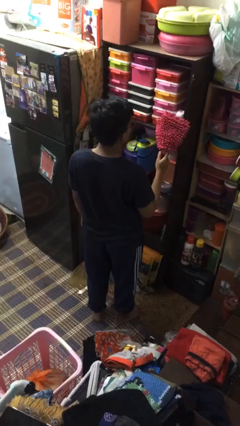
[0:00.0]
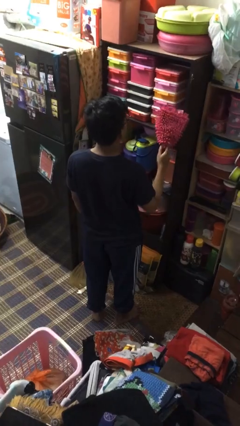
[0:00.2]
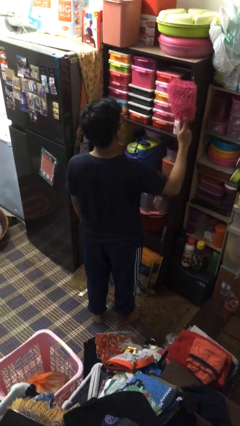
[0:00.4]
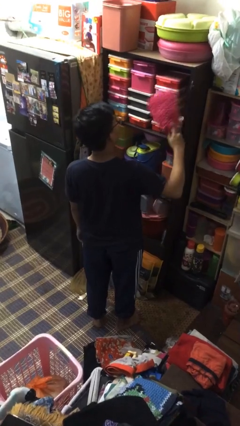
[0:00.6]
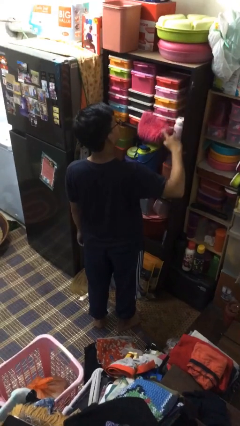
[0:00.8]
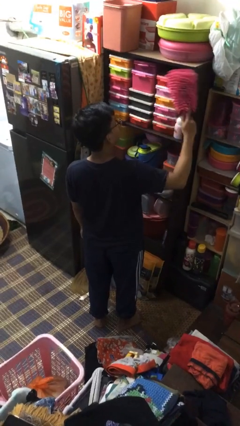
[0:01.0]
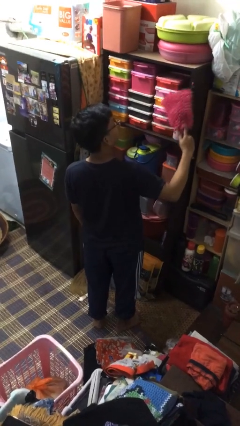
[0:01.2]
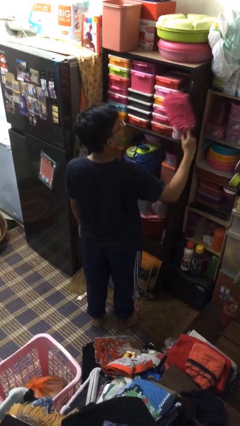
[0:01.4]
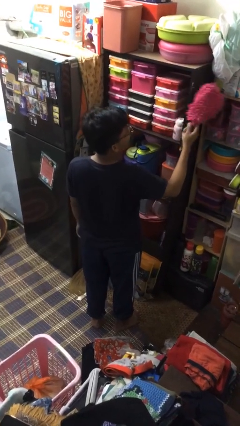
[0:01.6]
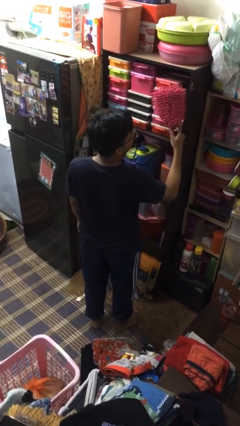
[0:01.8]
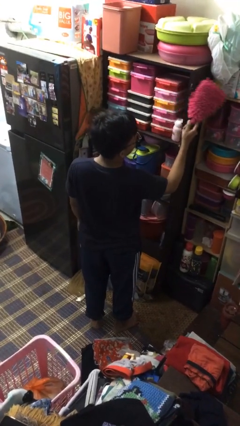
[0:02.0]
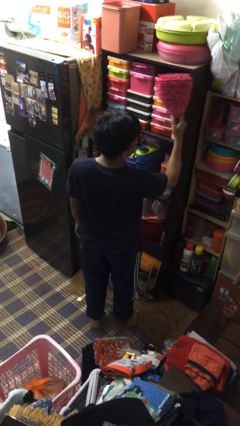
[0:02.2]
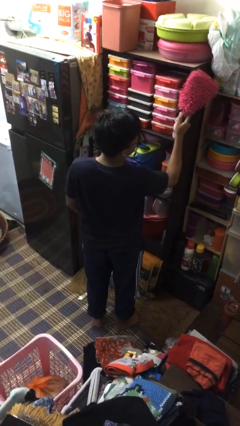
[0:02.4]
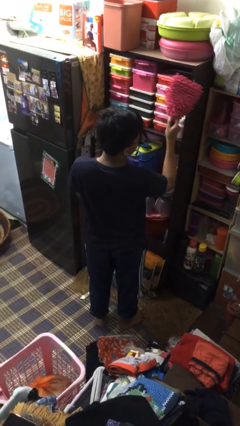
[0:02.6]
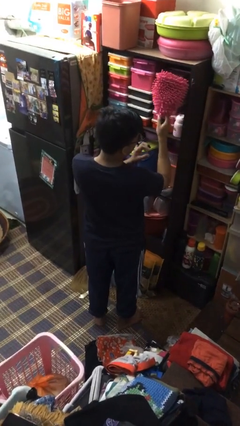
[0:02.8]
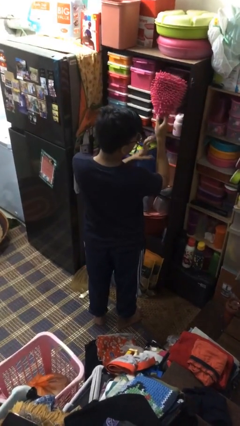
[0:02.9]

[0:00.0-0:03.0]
person dusts furniture

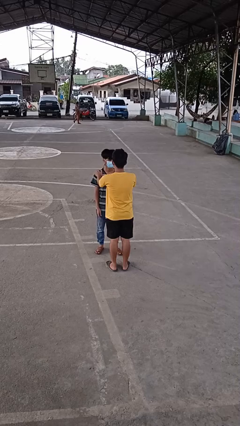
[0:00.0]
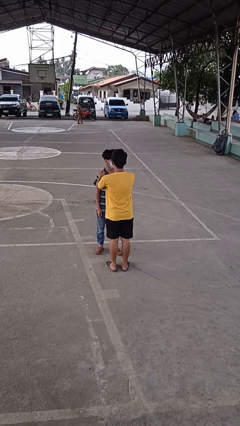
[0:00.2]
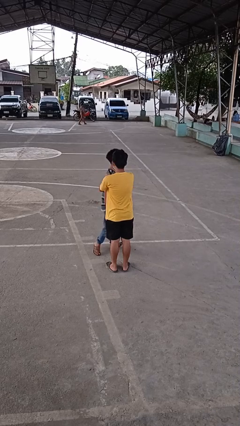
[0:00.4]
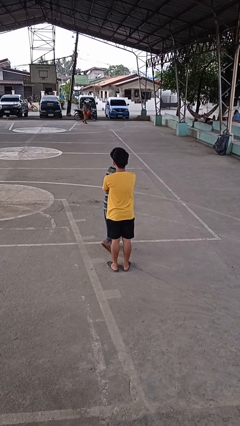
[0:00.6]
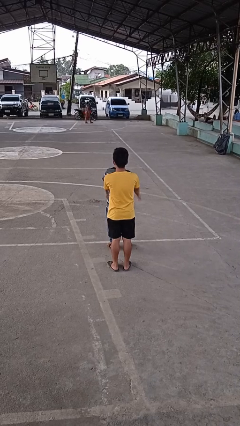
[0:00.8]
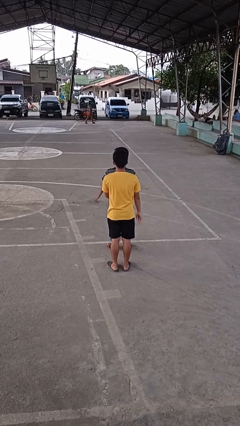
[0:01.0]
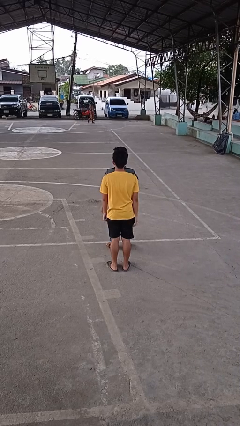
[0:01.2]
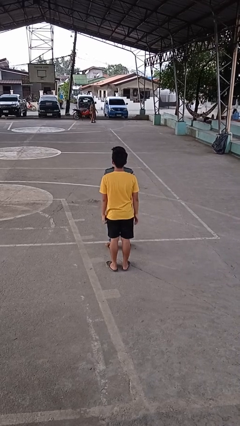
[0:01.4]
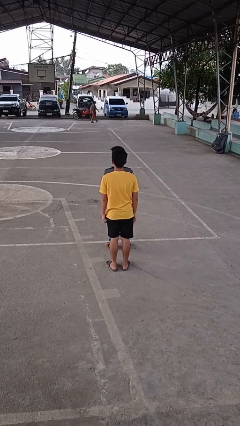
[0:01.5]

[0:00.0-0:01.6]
person spins person around

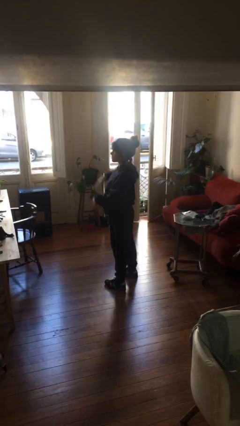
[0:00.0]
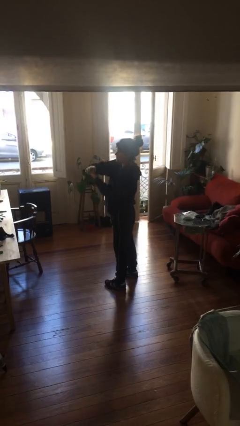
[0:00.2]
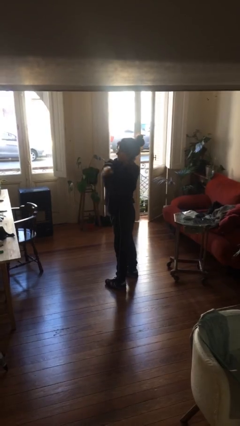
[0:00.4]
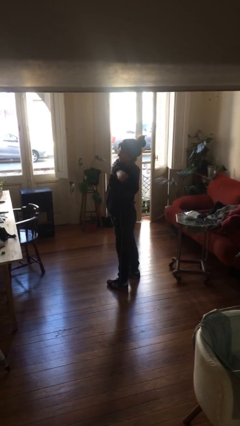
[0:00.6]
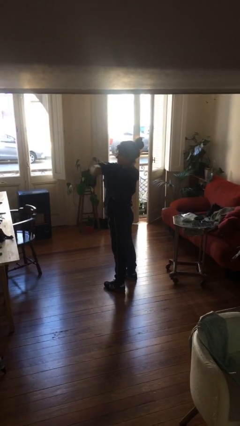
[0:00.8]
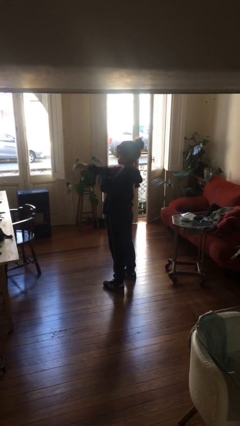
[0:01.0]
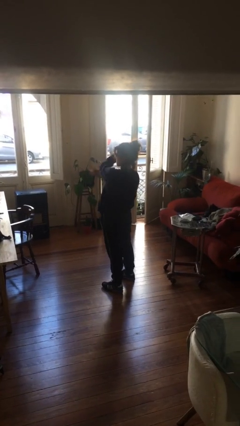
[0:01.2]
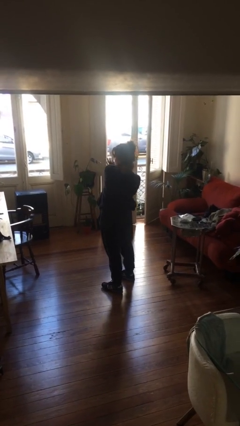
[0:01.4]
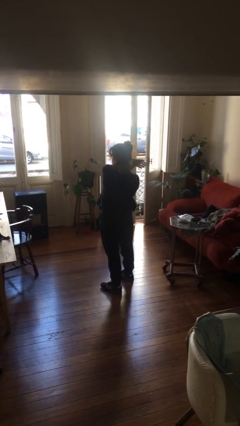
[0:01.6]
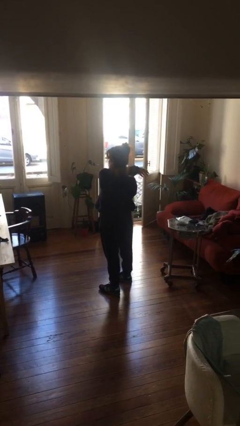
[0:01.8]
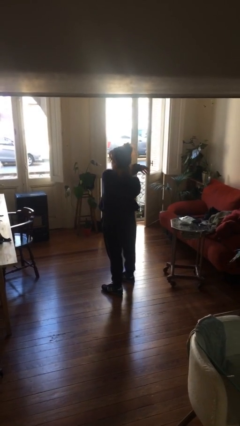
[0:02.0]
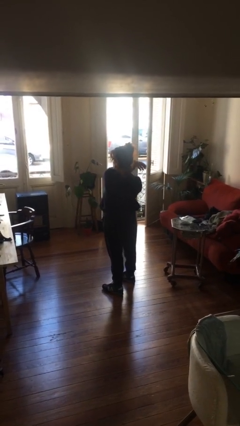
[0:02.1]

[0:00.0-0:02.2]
person stretches arms to side

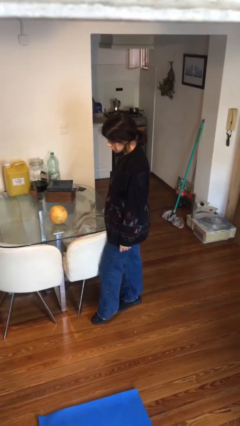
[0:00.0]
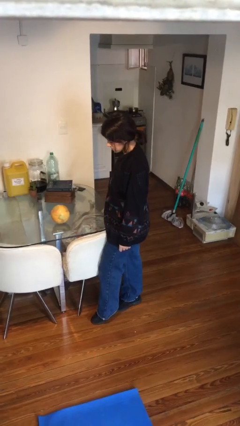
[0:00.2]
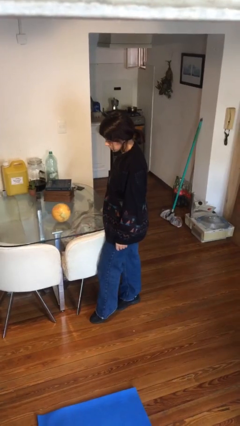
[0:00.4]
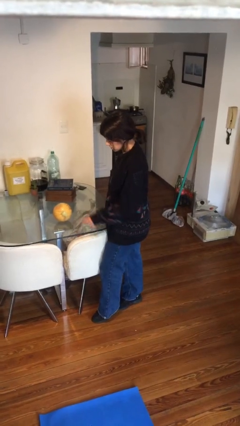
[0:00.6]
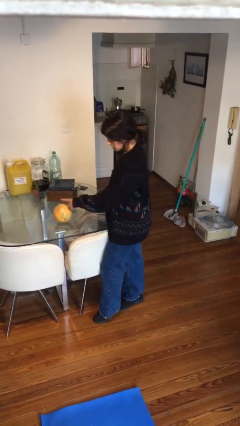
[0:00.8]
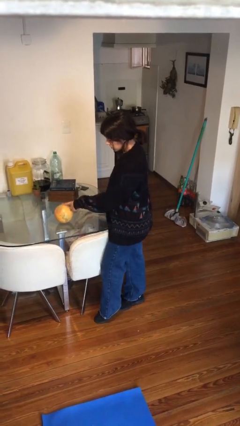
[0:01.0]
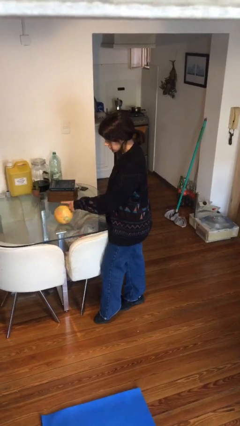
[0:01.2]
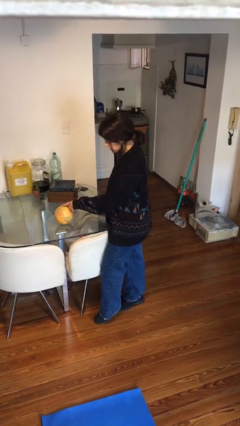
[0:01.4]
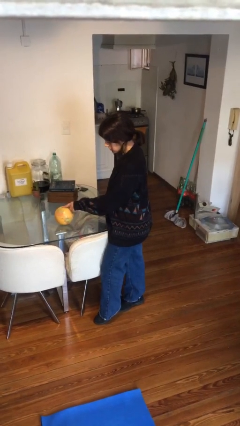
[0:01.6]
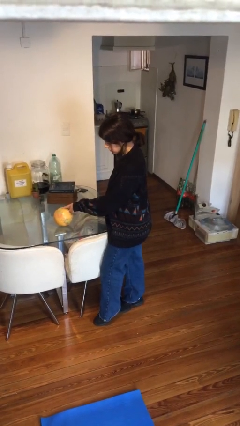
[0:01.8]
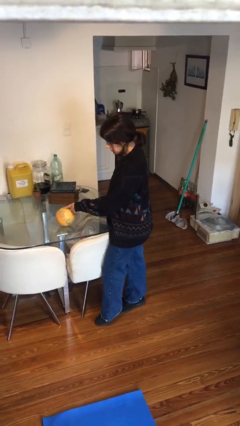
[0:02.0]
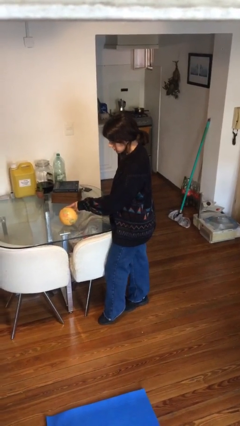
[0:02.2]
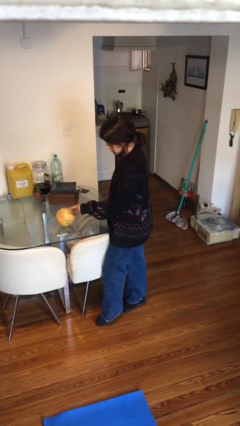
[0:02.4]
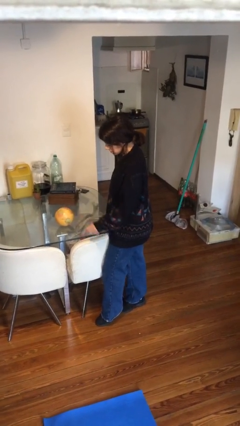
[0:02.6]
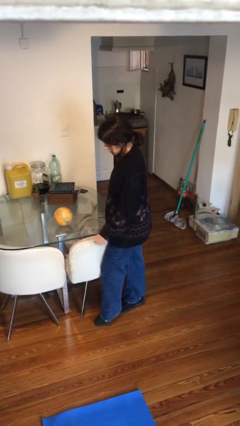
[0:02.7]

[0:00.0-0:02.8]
person taps object with finger

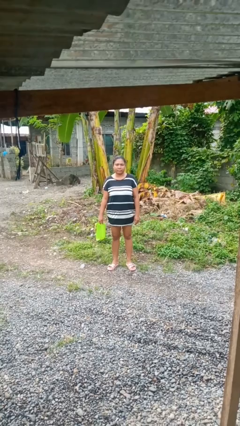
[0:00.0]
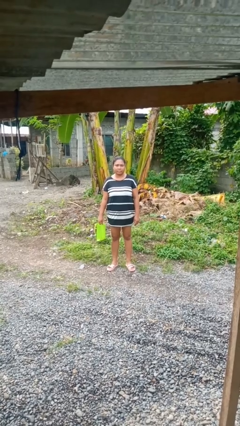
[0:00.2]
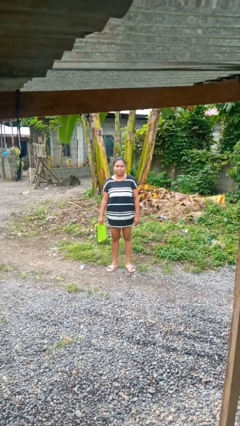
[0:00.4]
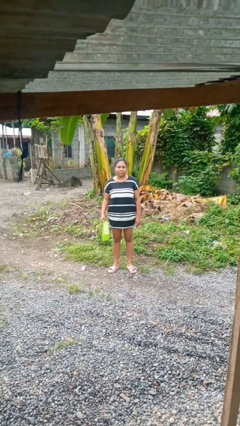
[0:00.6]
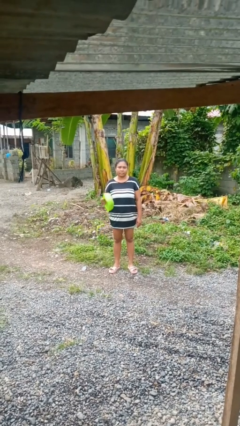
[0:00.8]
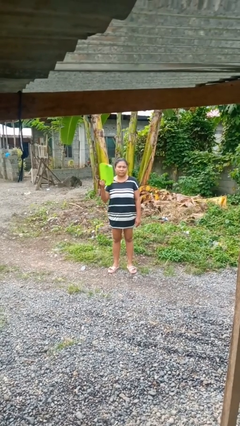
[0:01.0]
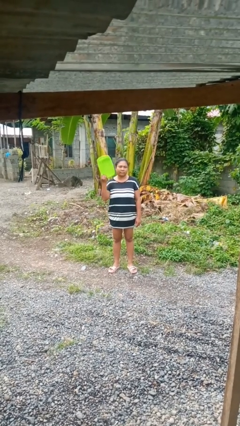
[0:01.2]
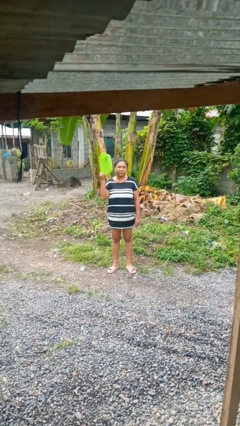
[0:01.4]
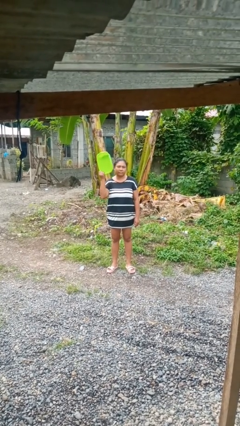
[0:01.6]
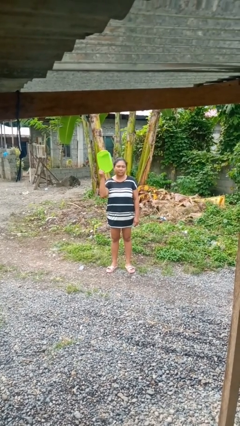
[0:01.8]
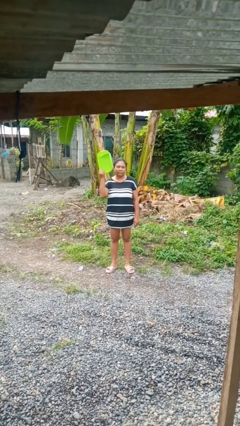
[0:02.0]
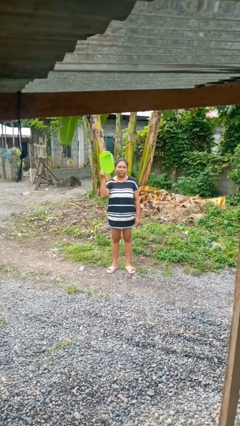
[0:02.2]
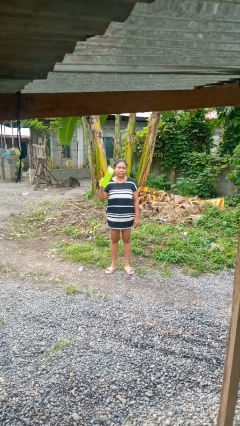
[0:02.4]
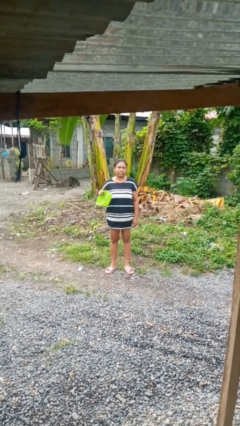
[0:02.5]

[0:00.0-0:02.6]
person holds object above head

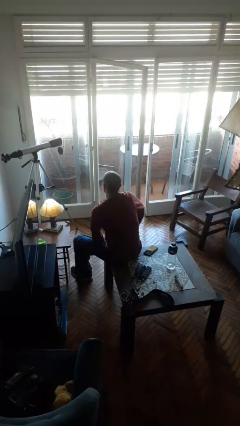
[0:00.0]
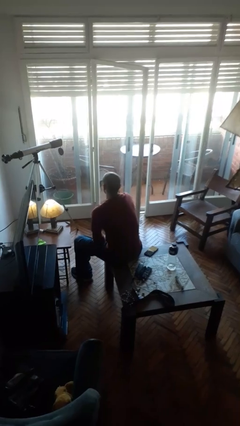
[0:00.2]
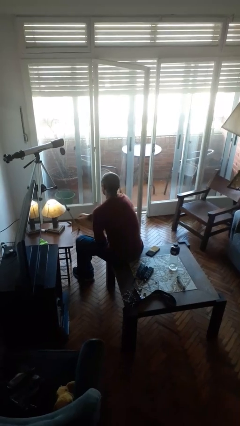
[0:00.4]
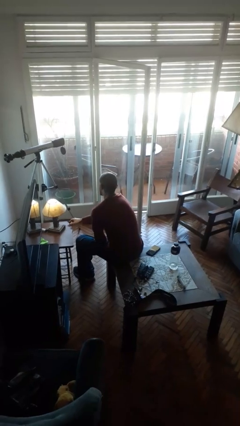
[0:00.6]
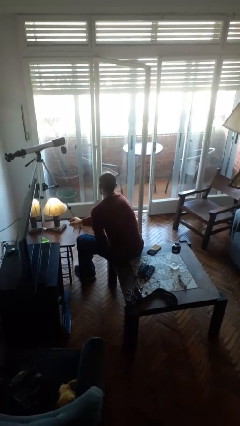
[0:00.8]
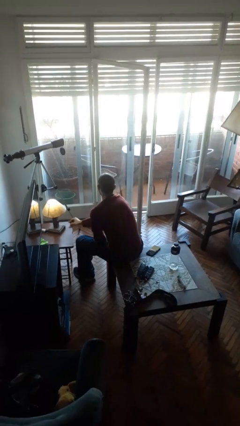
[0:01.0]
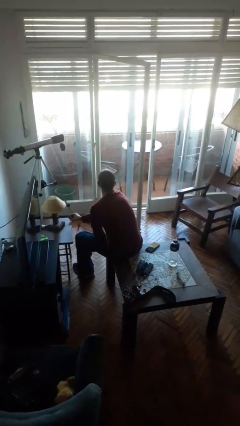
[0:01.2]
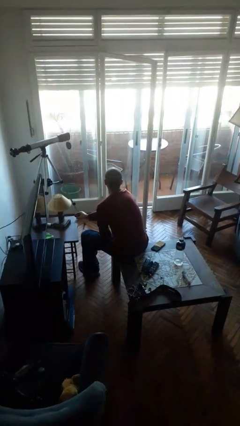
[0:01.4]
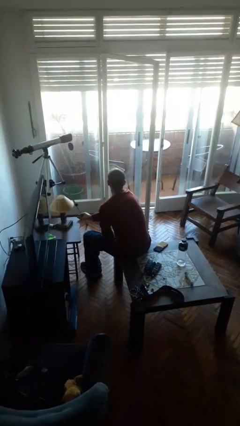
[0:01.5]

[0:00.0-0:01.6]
person turns off lamp

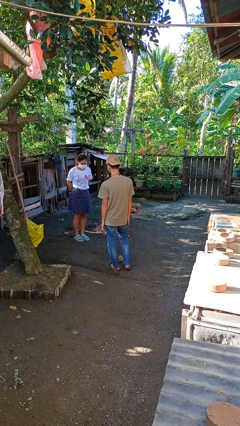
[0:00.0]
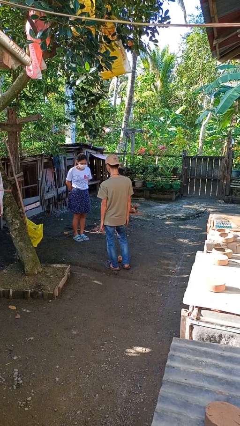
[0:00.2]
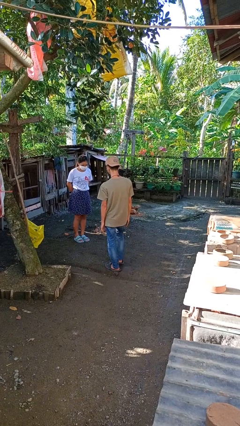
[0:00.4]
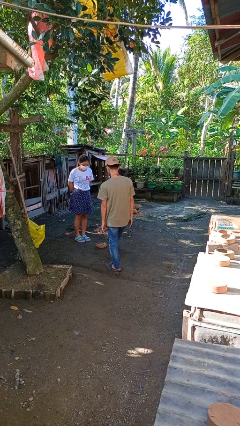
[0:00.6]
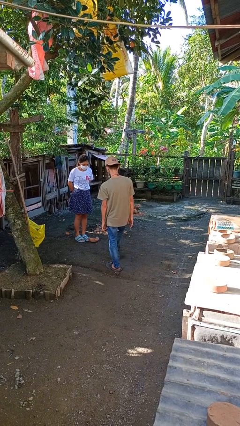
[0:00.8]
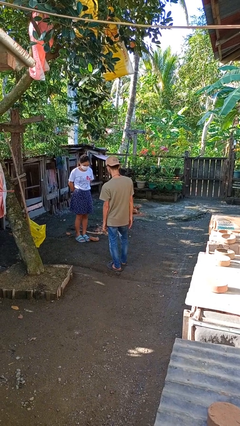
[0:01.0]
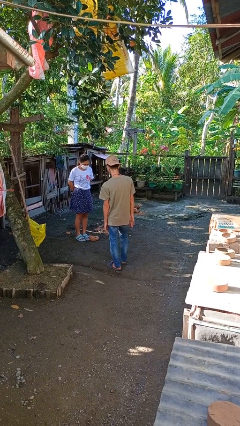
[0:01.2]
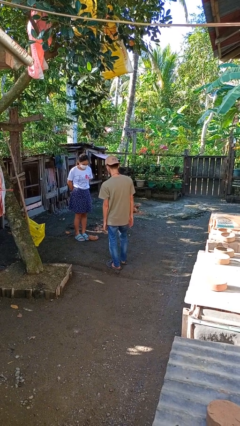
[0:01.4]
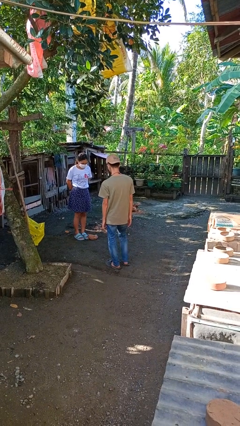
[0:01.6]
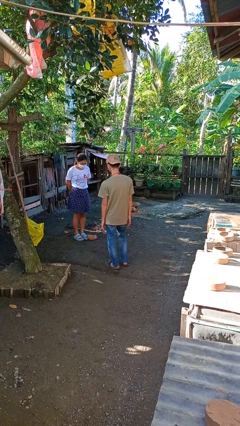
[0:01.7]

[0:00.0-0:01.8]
person kicks object to person

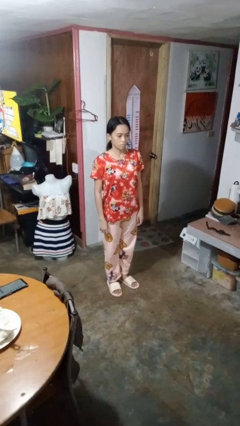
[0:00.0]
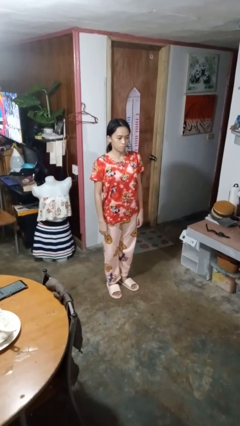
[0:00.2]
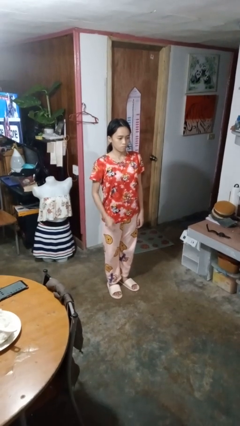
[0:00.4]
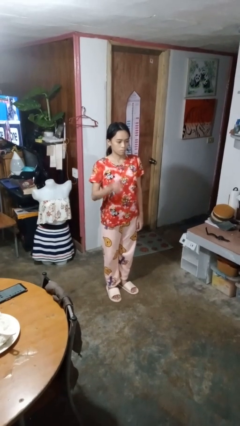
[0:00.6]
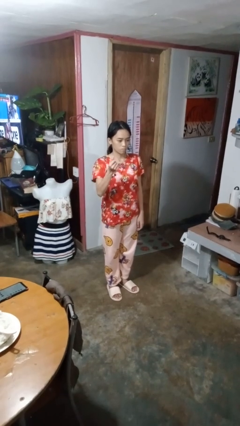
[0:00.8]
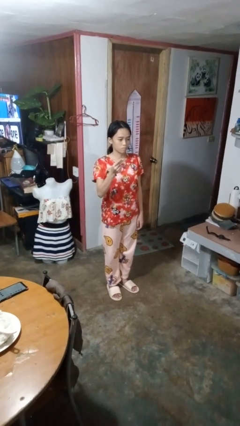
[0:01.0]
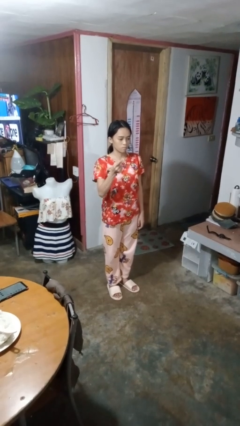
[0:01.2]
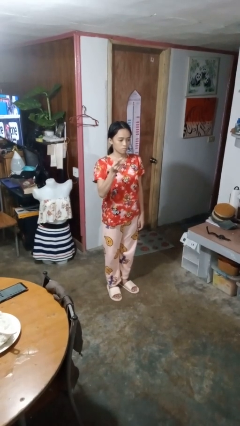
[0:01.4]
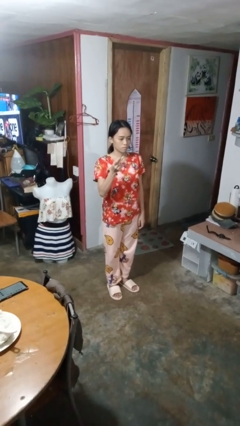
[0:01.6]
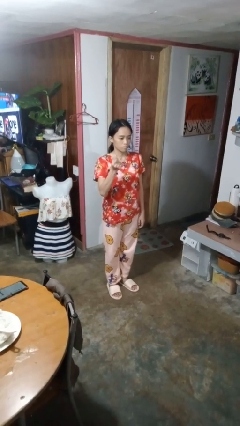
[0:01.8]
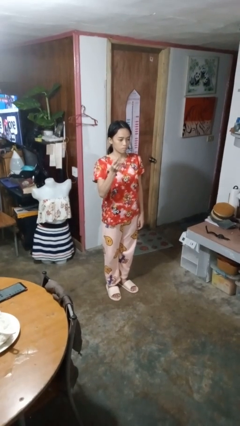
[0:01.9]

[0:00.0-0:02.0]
person snaps fingers
